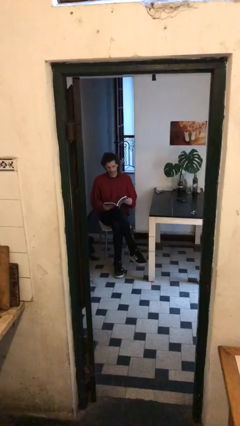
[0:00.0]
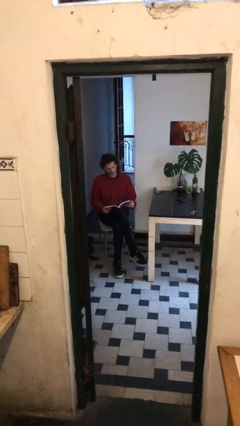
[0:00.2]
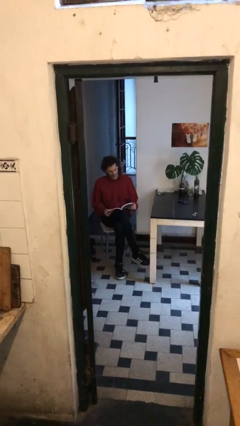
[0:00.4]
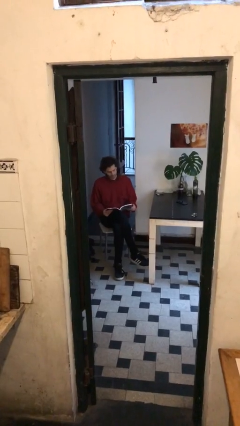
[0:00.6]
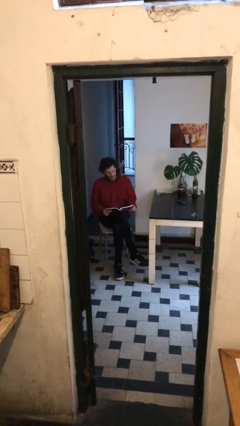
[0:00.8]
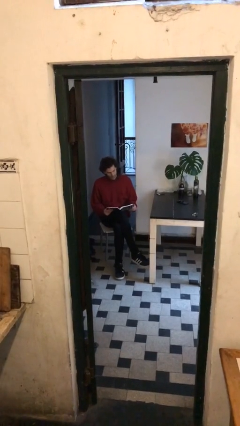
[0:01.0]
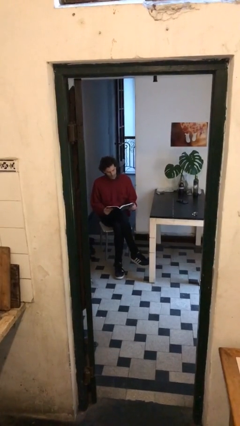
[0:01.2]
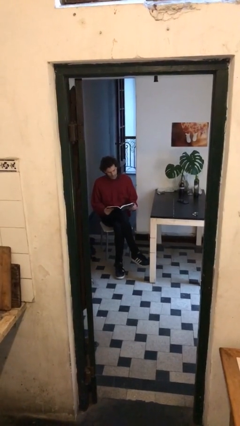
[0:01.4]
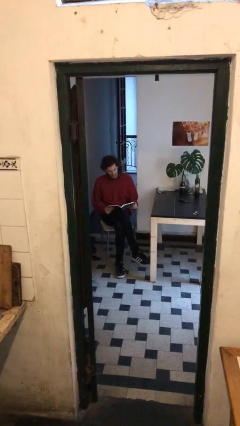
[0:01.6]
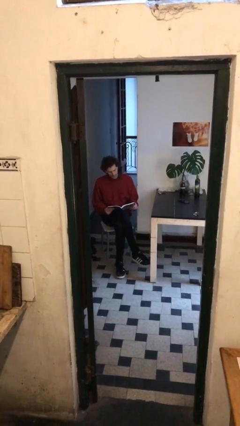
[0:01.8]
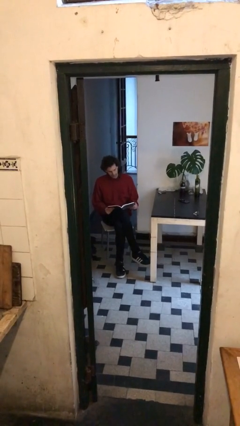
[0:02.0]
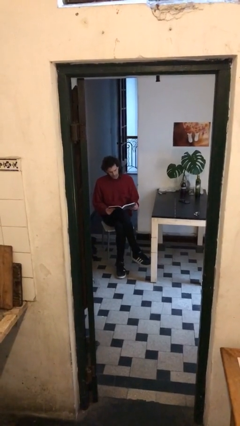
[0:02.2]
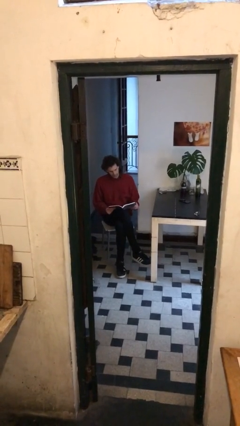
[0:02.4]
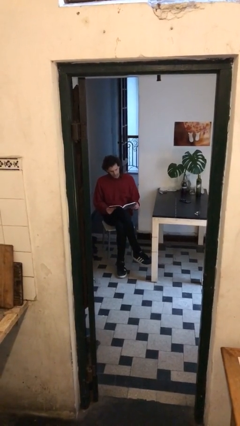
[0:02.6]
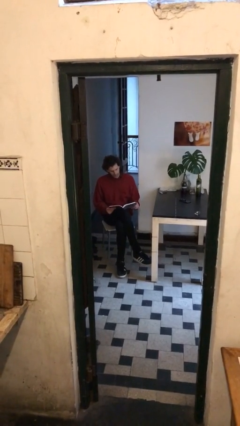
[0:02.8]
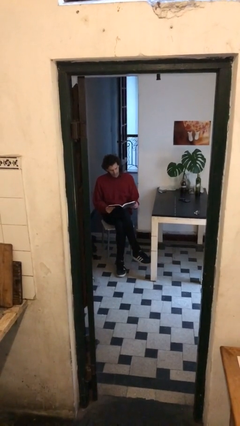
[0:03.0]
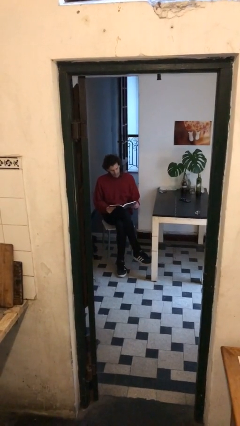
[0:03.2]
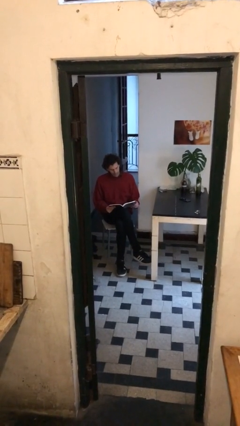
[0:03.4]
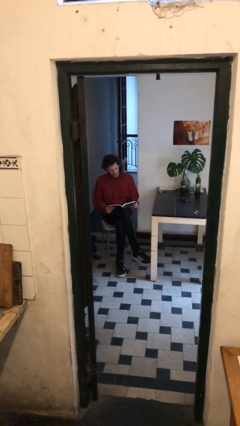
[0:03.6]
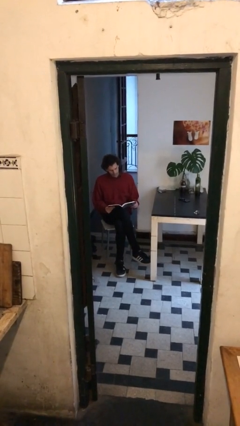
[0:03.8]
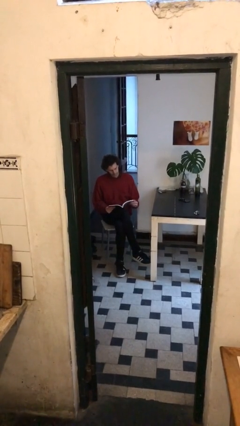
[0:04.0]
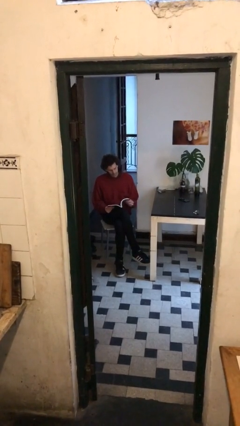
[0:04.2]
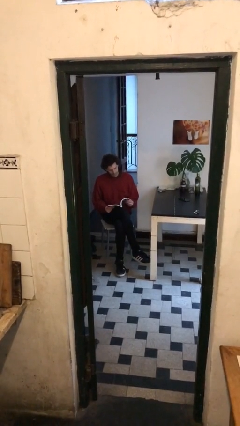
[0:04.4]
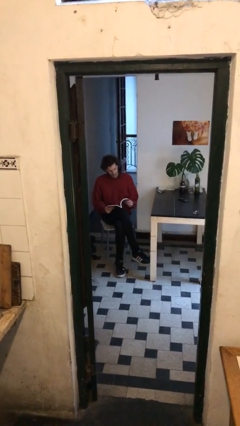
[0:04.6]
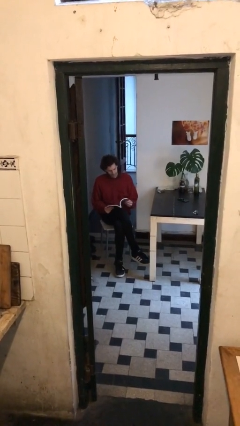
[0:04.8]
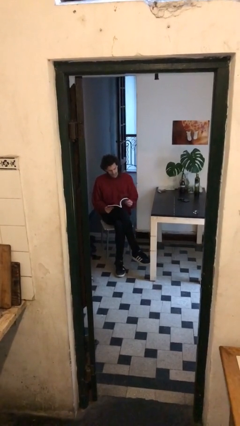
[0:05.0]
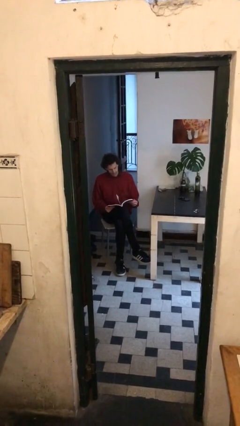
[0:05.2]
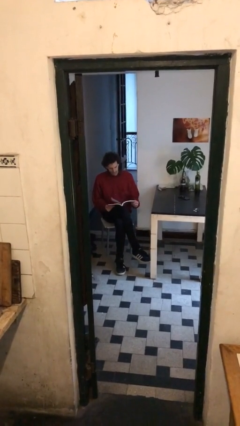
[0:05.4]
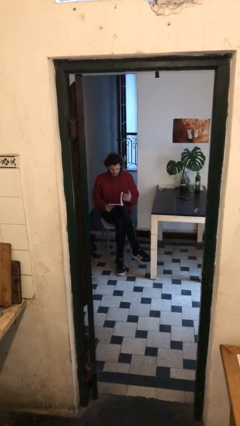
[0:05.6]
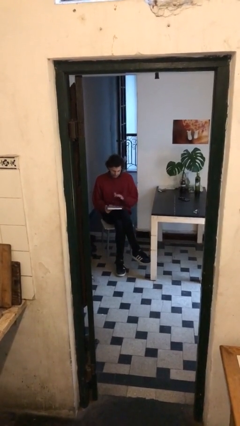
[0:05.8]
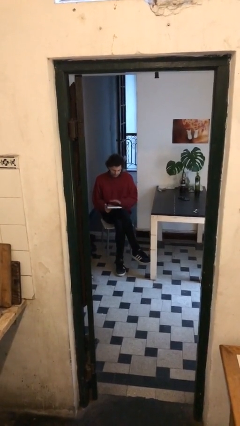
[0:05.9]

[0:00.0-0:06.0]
person reads document

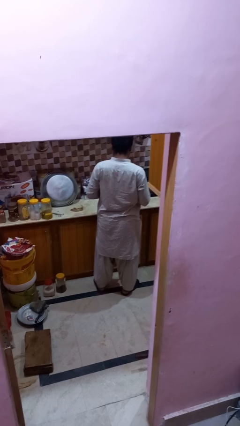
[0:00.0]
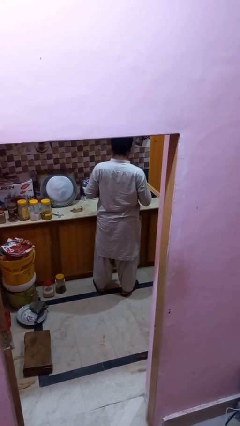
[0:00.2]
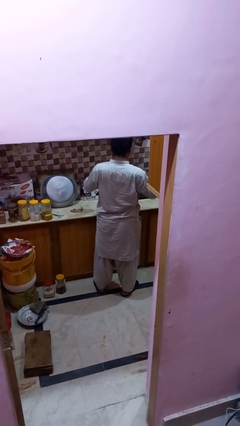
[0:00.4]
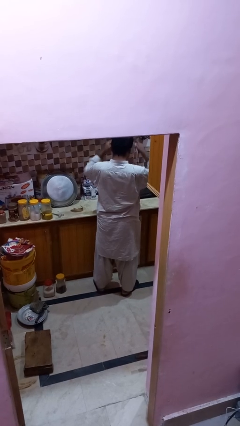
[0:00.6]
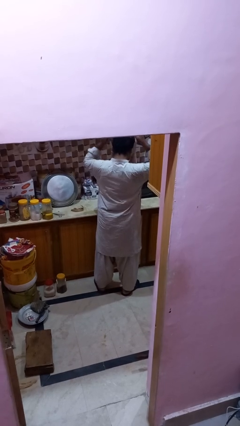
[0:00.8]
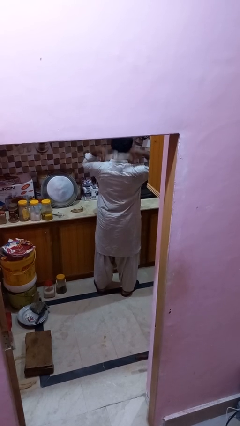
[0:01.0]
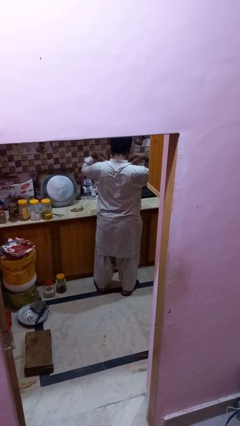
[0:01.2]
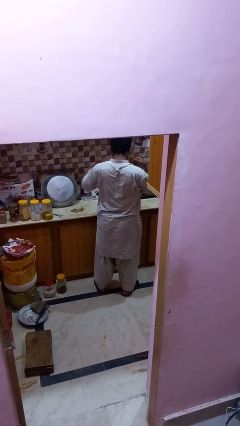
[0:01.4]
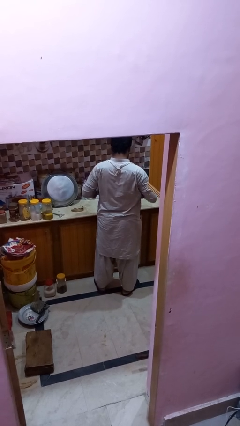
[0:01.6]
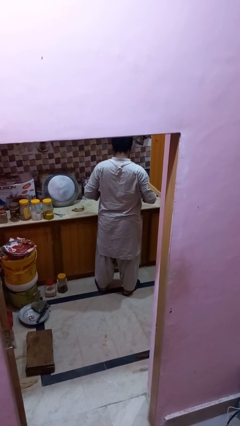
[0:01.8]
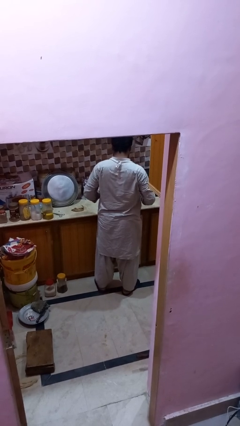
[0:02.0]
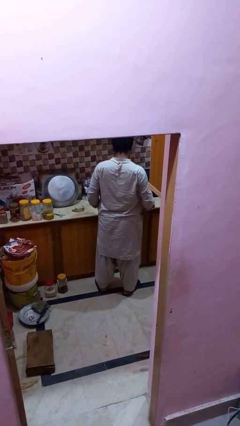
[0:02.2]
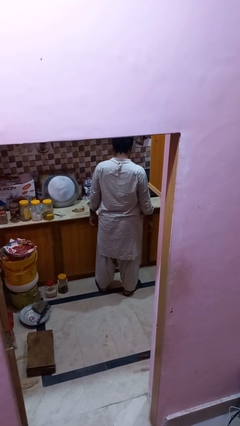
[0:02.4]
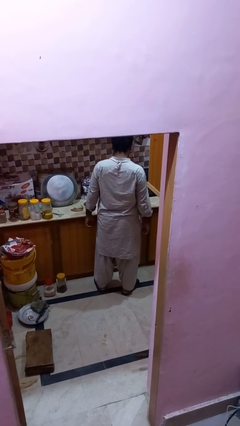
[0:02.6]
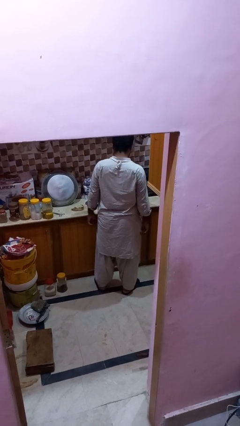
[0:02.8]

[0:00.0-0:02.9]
person puts on apron

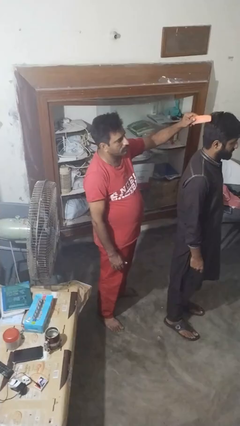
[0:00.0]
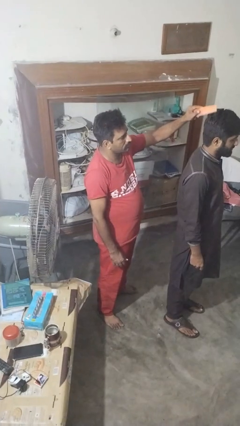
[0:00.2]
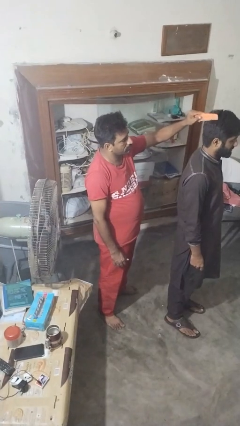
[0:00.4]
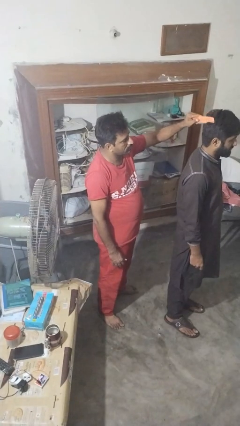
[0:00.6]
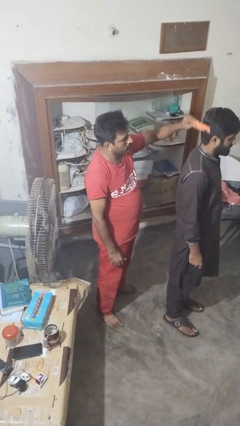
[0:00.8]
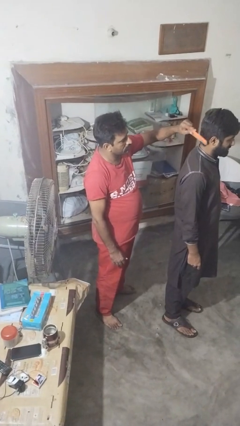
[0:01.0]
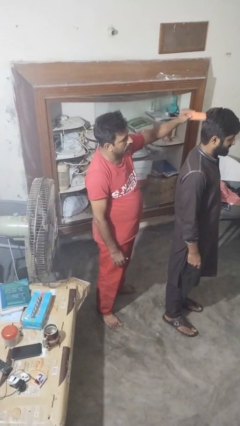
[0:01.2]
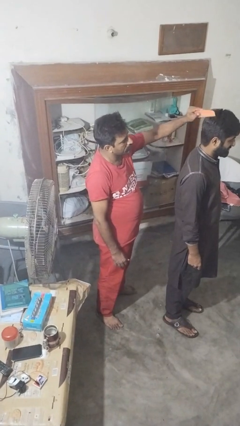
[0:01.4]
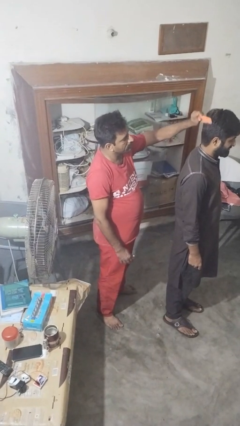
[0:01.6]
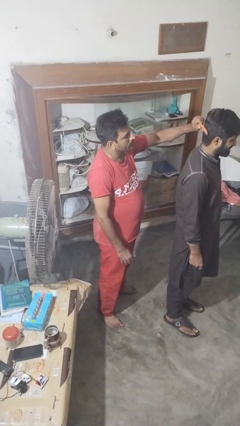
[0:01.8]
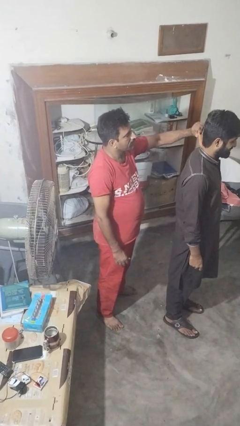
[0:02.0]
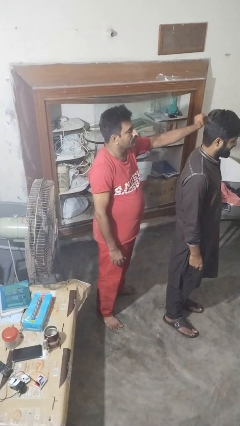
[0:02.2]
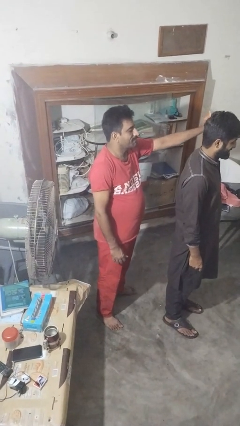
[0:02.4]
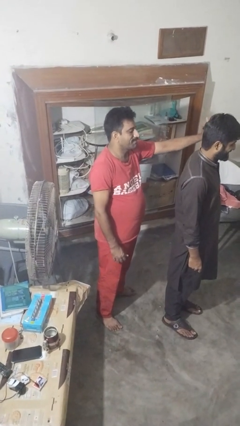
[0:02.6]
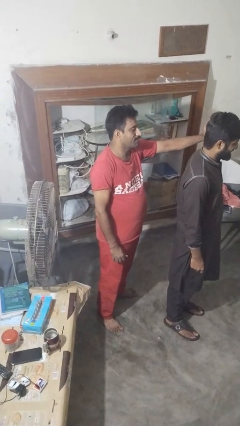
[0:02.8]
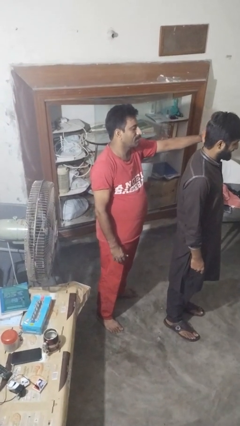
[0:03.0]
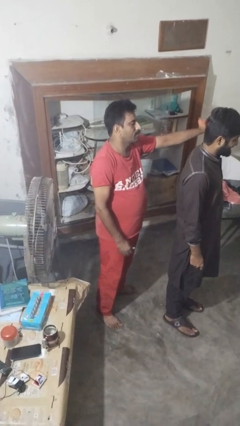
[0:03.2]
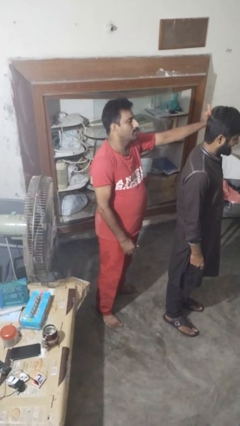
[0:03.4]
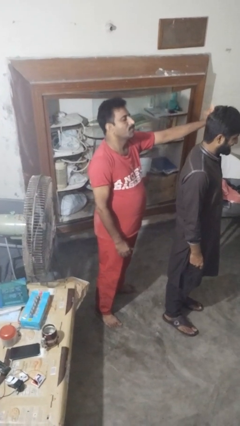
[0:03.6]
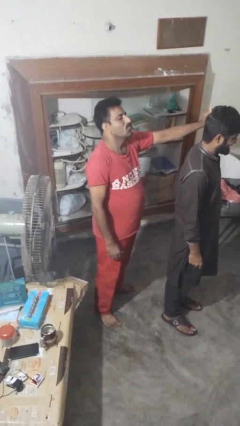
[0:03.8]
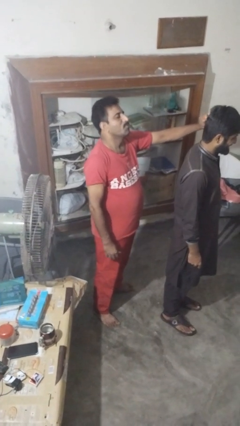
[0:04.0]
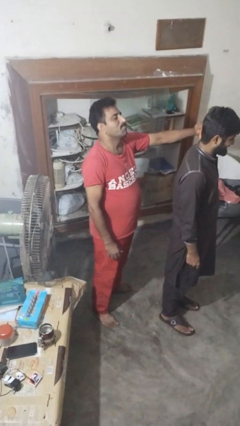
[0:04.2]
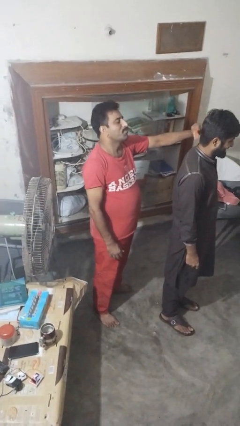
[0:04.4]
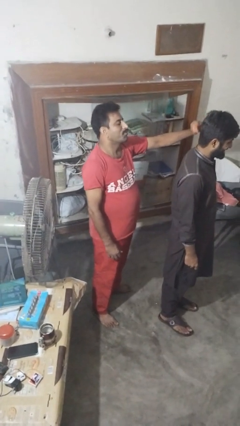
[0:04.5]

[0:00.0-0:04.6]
person brushes hair of person

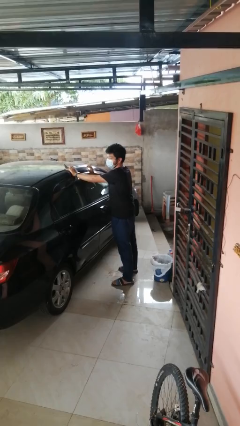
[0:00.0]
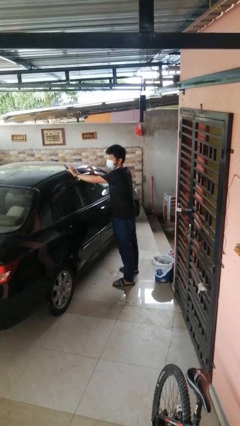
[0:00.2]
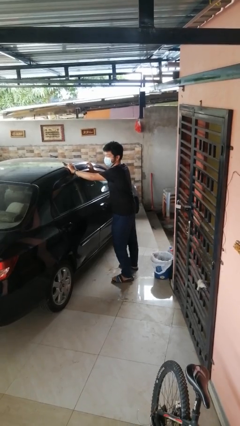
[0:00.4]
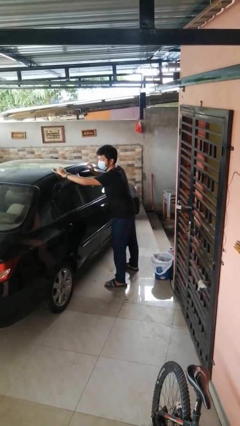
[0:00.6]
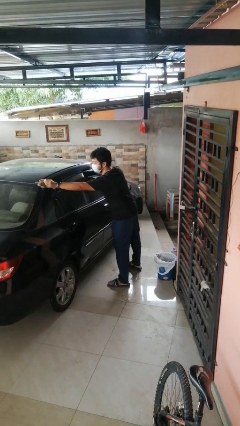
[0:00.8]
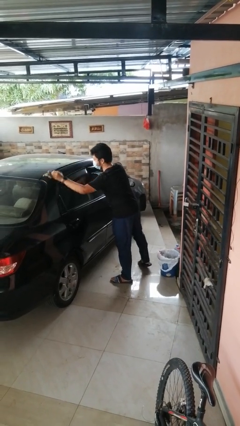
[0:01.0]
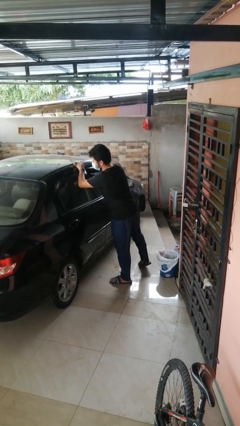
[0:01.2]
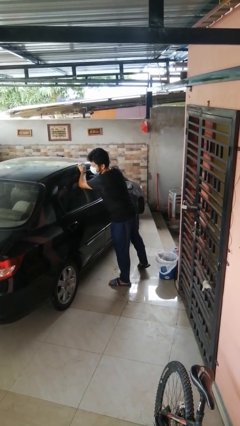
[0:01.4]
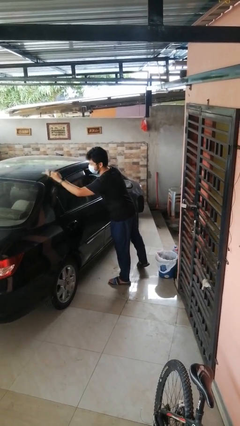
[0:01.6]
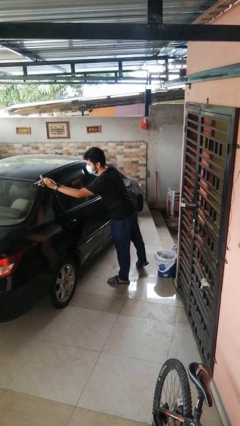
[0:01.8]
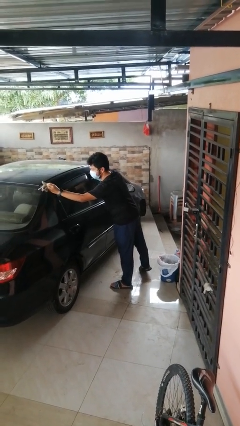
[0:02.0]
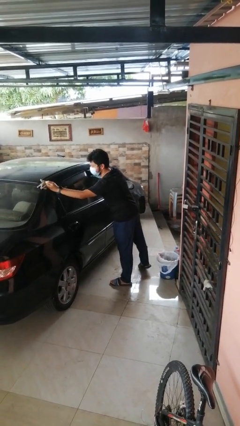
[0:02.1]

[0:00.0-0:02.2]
person polishes car with rag

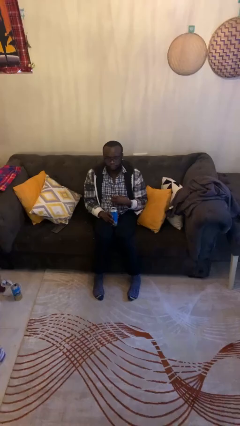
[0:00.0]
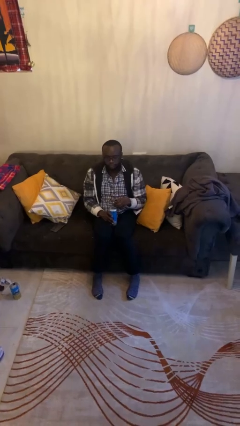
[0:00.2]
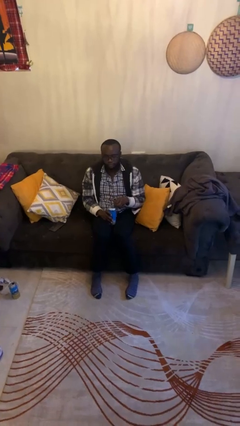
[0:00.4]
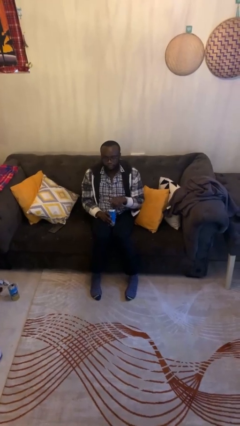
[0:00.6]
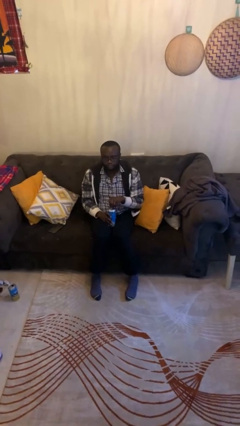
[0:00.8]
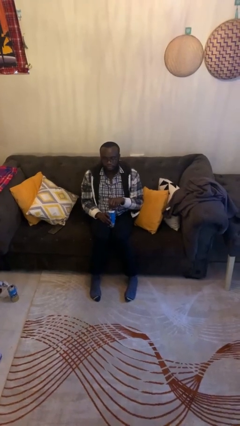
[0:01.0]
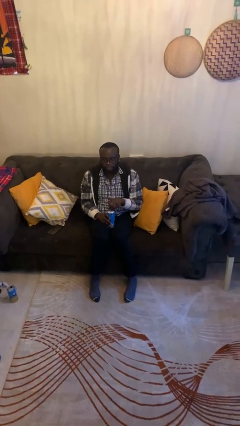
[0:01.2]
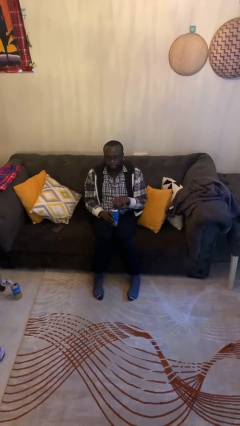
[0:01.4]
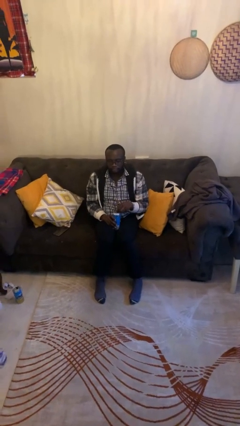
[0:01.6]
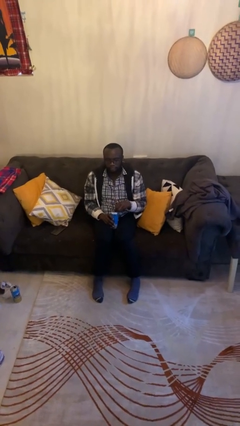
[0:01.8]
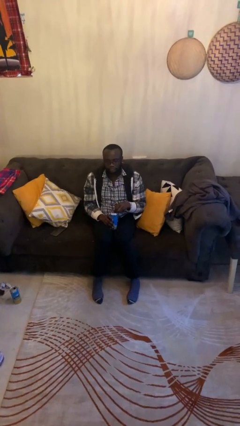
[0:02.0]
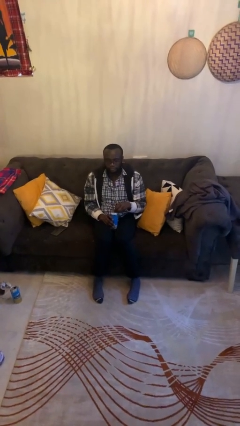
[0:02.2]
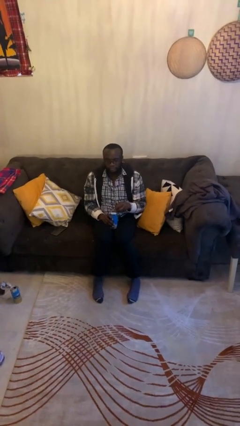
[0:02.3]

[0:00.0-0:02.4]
person opens beverage can
